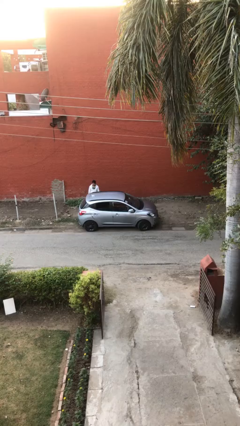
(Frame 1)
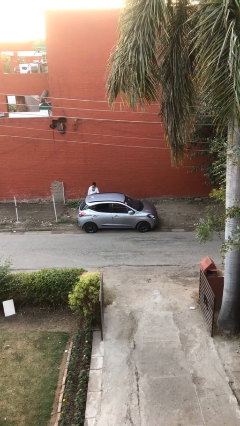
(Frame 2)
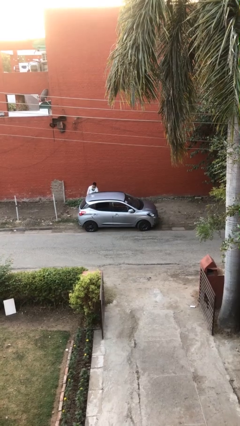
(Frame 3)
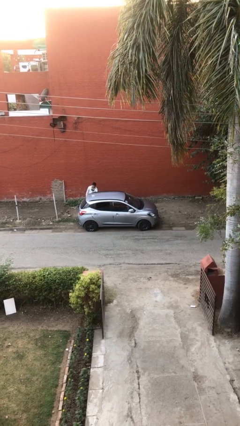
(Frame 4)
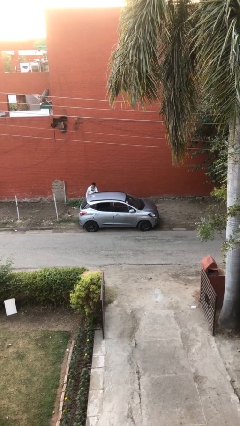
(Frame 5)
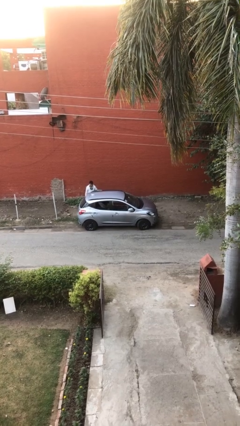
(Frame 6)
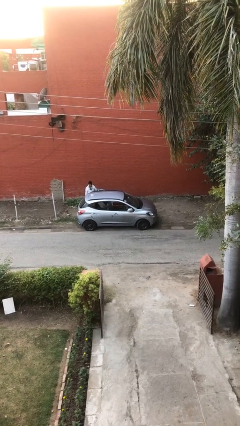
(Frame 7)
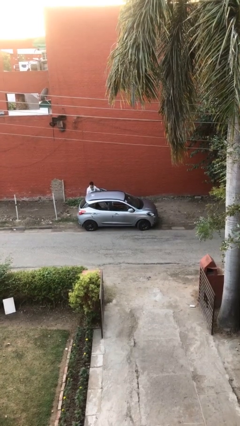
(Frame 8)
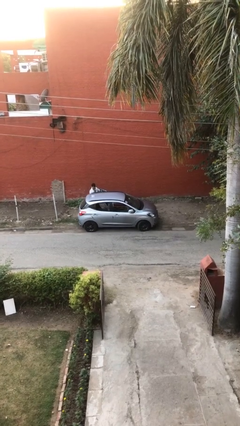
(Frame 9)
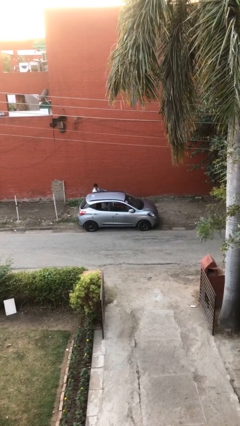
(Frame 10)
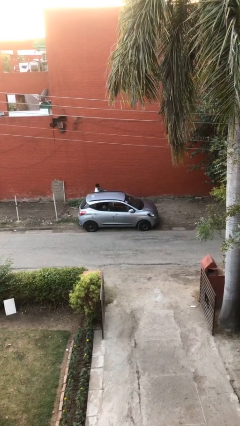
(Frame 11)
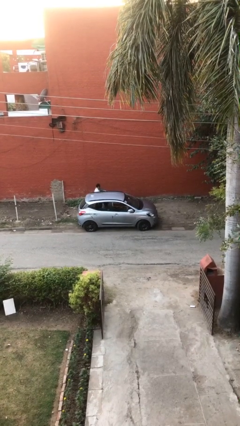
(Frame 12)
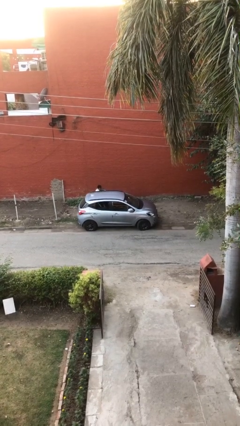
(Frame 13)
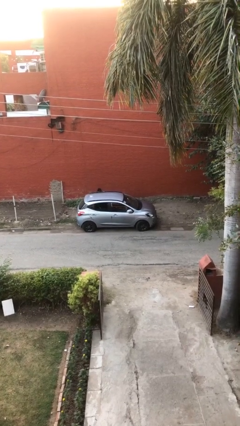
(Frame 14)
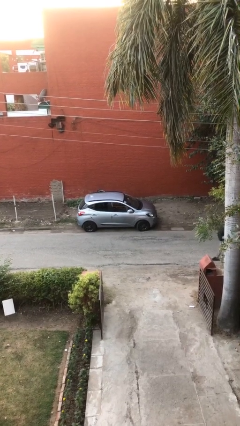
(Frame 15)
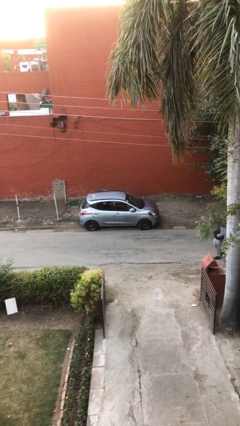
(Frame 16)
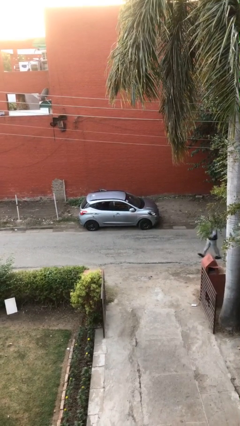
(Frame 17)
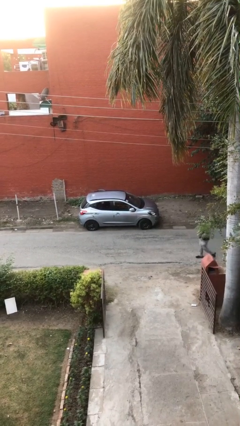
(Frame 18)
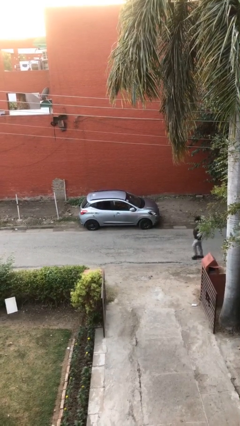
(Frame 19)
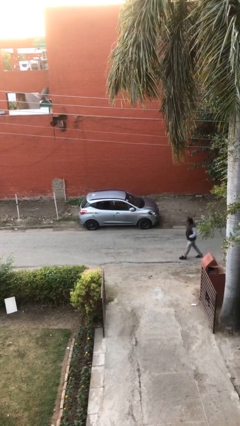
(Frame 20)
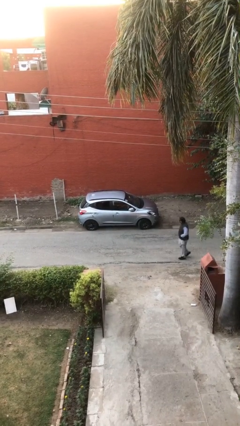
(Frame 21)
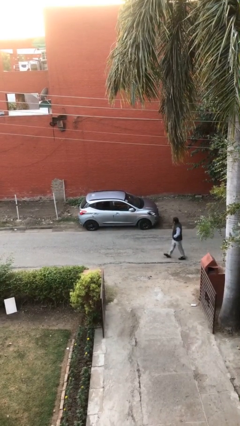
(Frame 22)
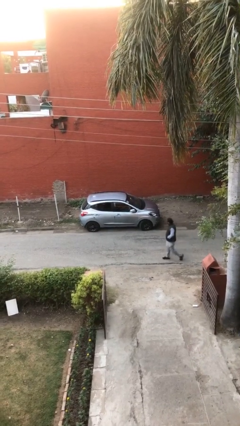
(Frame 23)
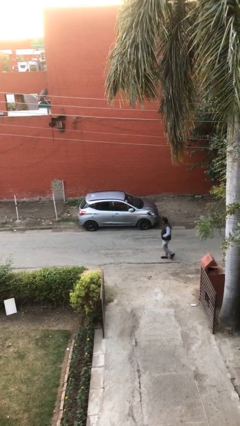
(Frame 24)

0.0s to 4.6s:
car picks up person

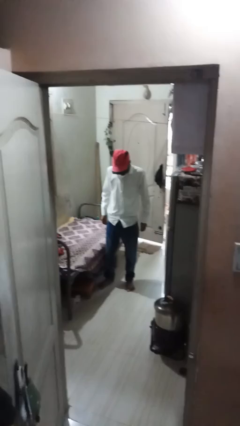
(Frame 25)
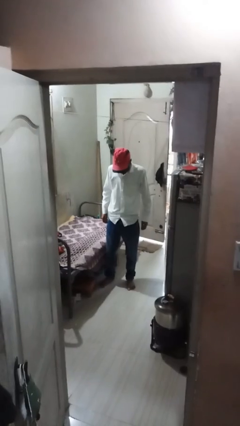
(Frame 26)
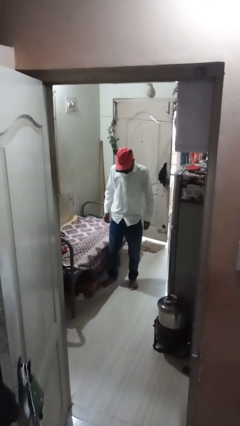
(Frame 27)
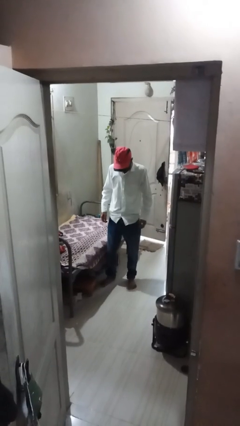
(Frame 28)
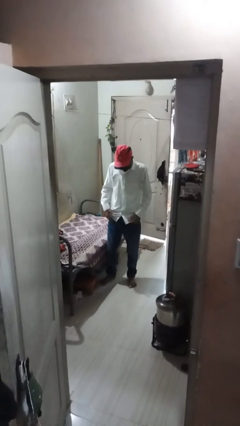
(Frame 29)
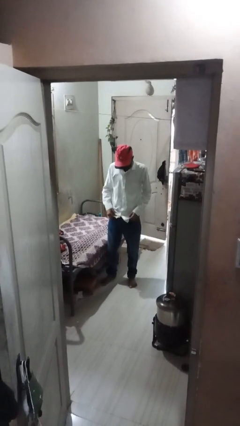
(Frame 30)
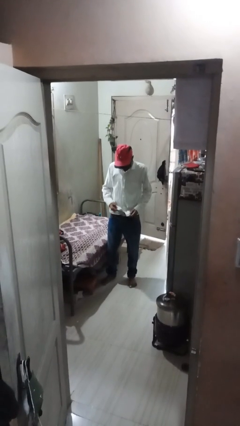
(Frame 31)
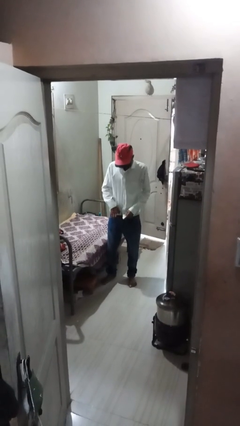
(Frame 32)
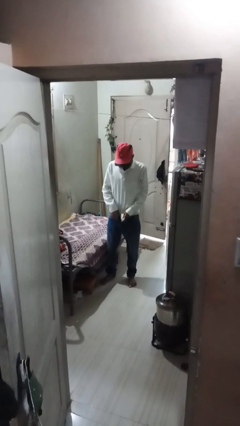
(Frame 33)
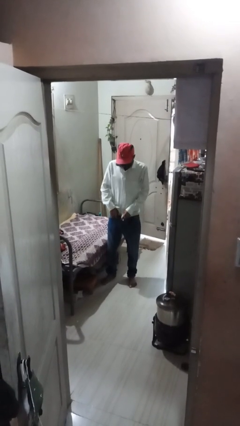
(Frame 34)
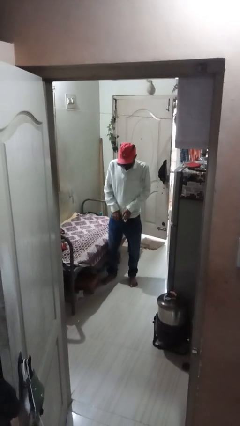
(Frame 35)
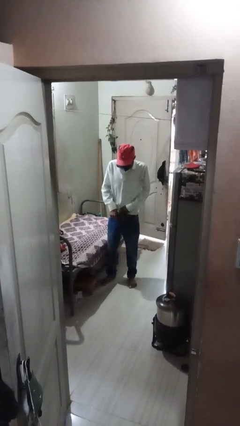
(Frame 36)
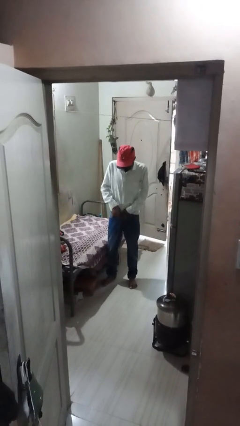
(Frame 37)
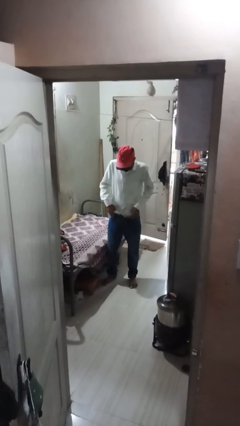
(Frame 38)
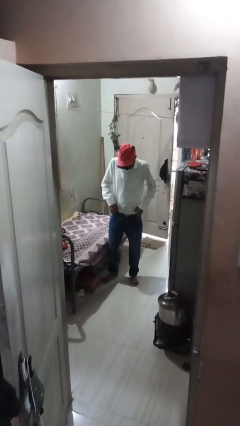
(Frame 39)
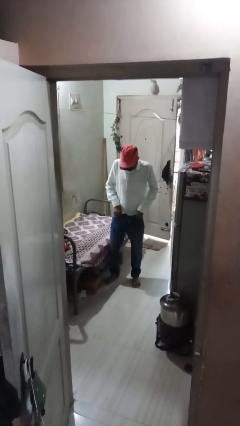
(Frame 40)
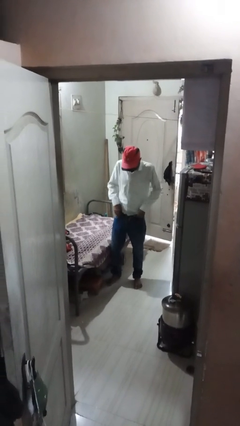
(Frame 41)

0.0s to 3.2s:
person tucks in shirt

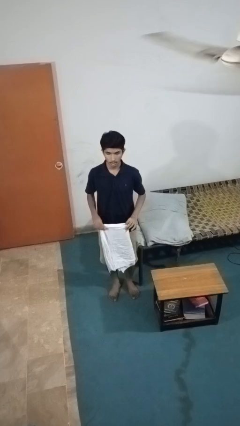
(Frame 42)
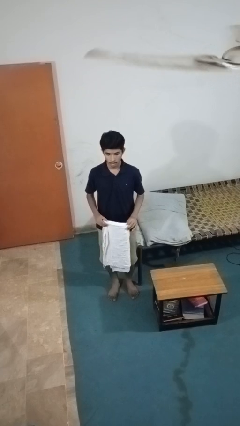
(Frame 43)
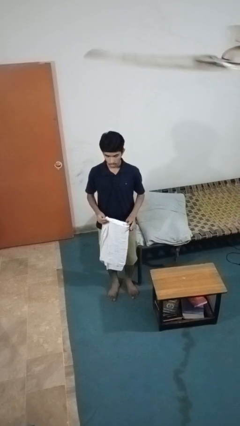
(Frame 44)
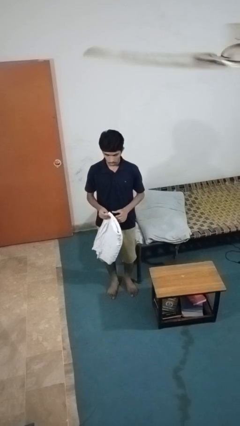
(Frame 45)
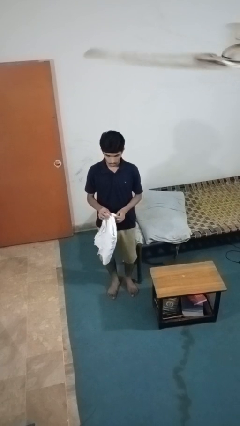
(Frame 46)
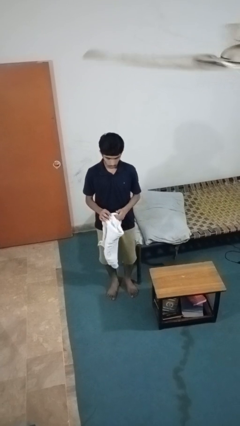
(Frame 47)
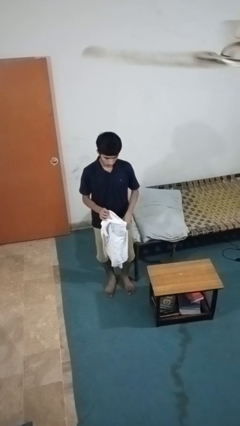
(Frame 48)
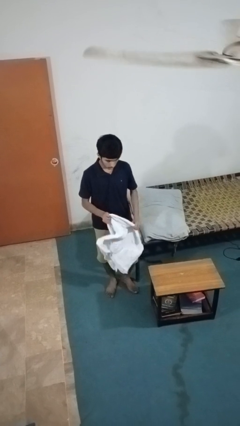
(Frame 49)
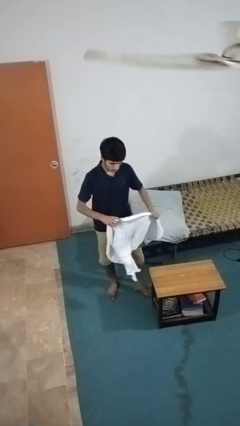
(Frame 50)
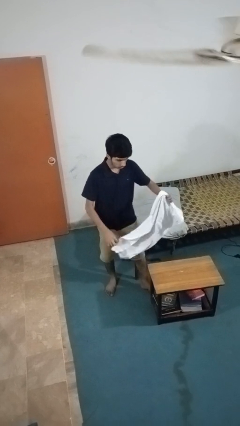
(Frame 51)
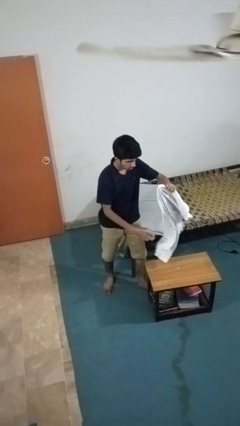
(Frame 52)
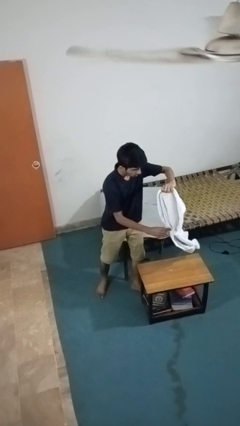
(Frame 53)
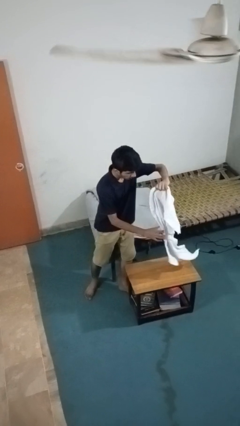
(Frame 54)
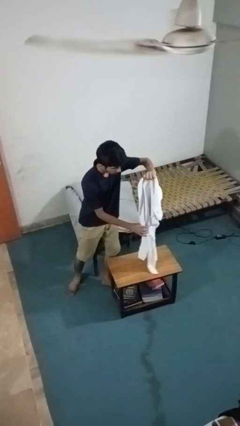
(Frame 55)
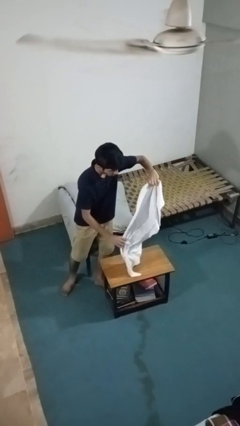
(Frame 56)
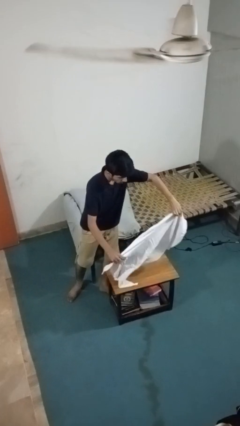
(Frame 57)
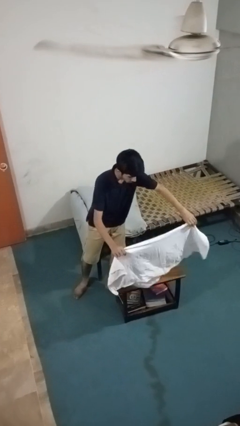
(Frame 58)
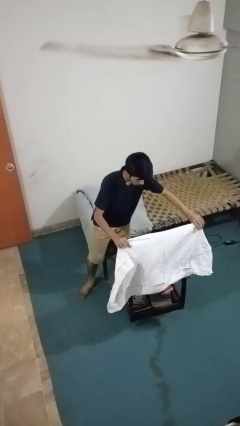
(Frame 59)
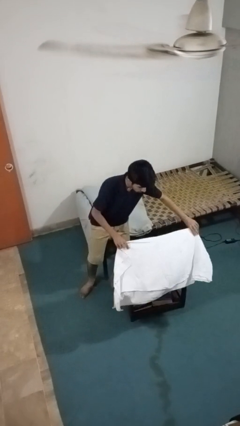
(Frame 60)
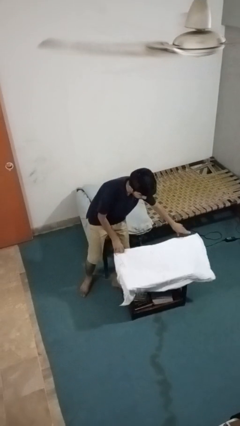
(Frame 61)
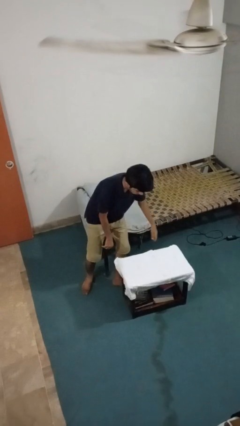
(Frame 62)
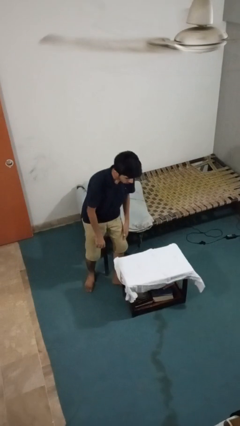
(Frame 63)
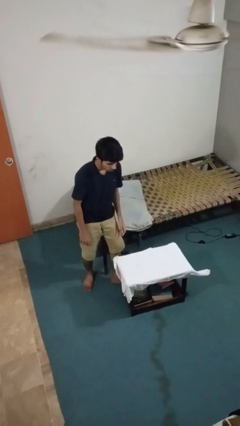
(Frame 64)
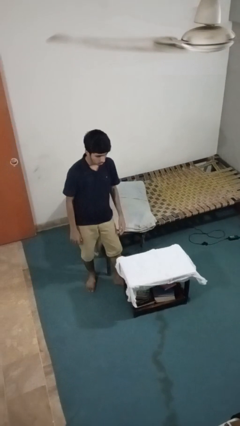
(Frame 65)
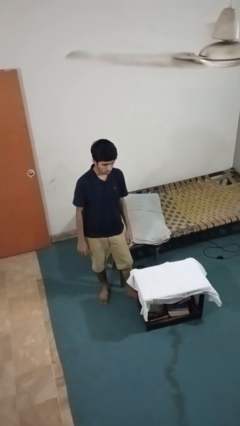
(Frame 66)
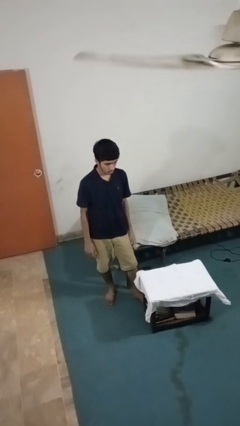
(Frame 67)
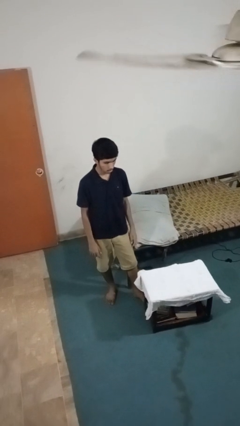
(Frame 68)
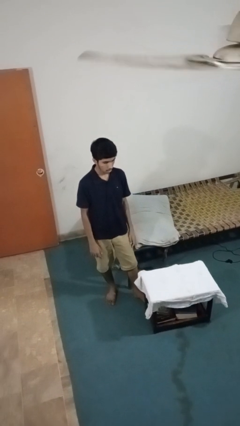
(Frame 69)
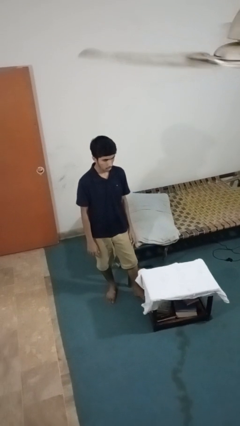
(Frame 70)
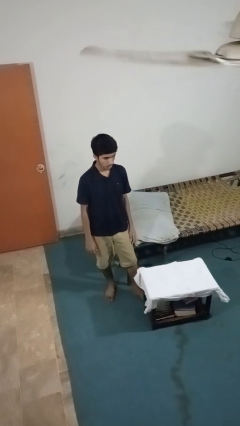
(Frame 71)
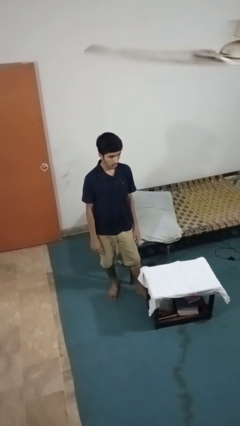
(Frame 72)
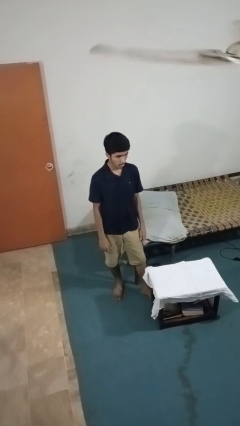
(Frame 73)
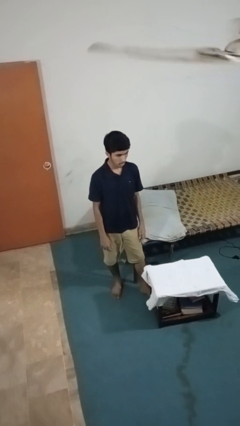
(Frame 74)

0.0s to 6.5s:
person spreads tablecloth

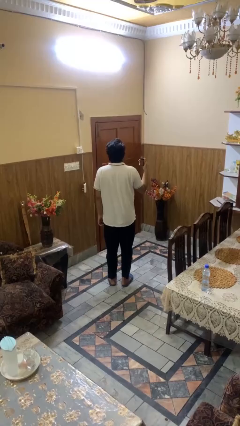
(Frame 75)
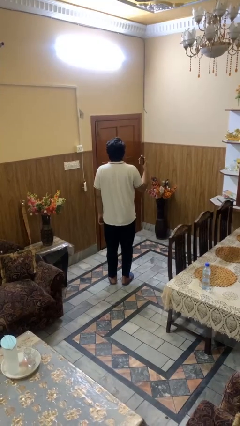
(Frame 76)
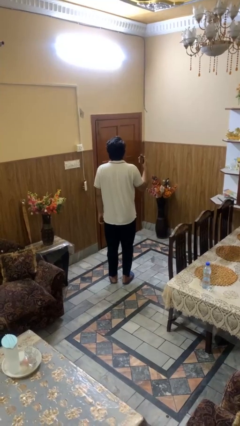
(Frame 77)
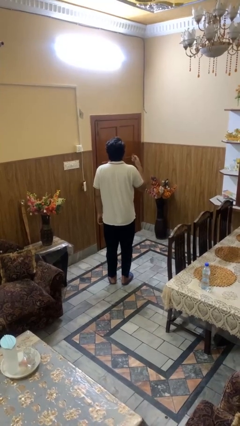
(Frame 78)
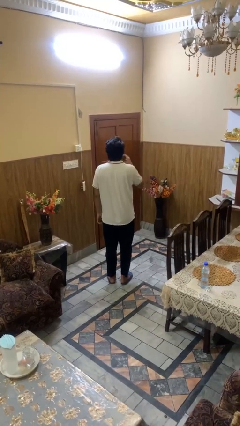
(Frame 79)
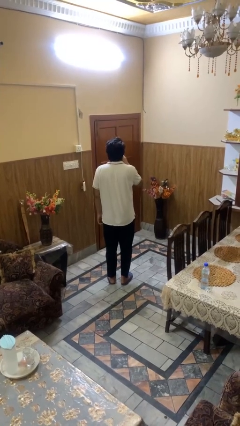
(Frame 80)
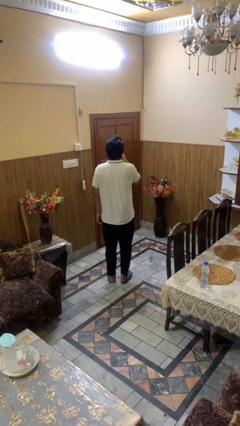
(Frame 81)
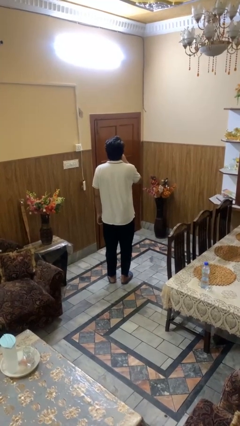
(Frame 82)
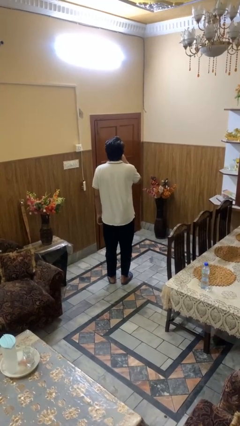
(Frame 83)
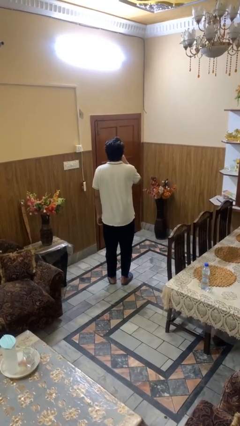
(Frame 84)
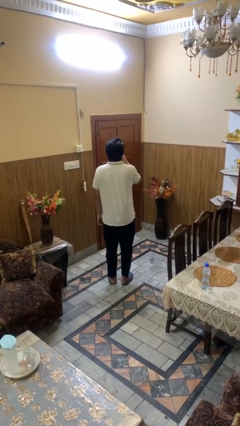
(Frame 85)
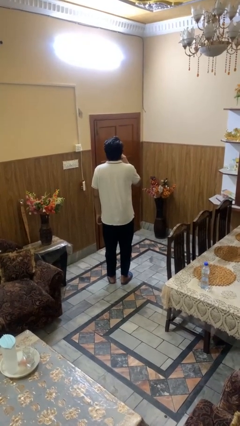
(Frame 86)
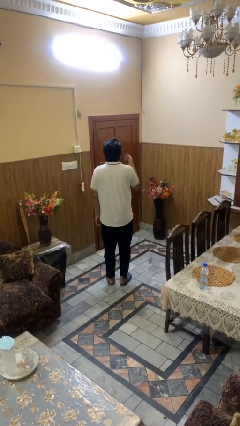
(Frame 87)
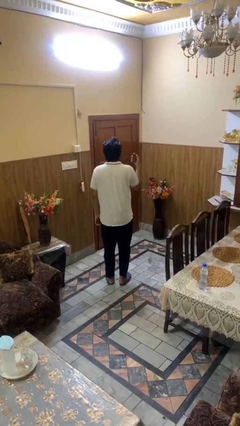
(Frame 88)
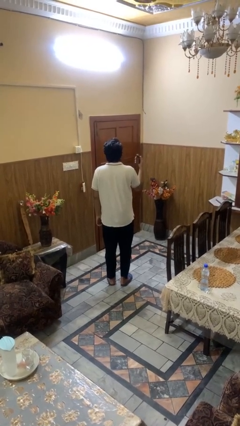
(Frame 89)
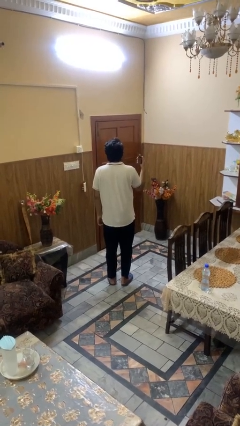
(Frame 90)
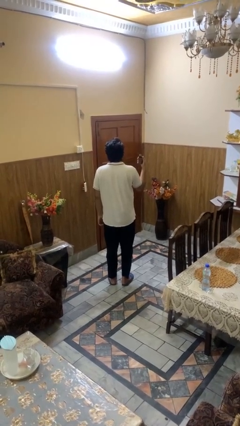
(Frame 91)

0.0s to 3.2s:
person vapes

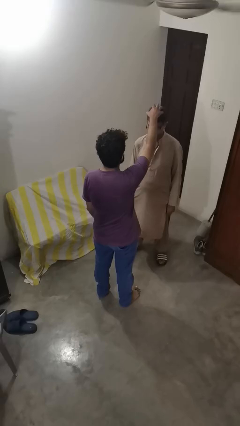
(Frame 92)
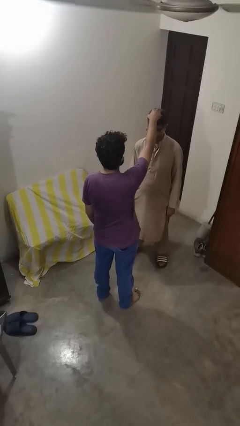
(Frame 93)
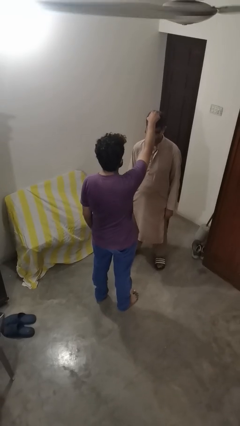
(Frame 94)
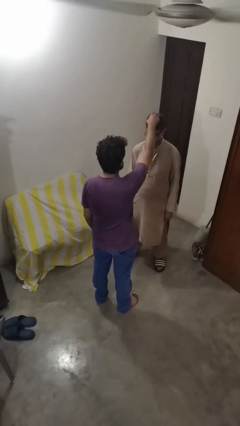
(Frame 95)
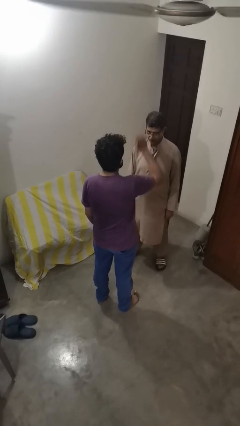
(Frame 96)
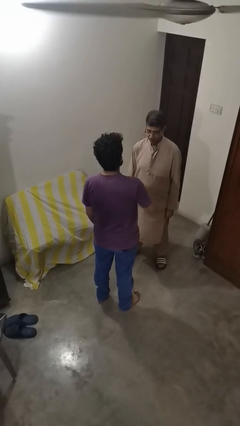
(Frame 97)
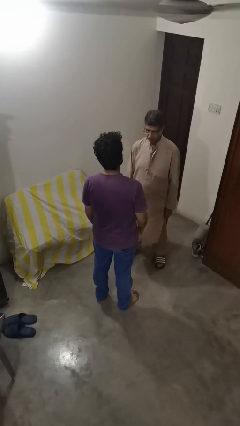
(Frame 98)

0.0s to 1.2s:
person grabs person by hair
